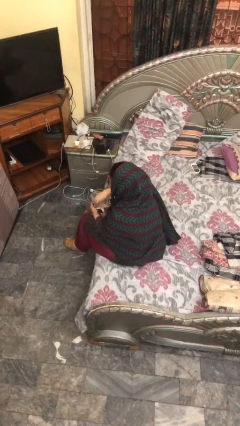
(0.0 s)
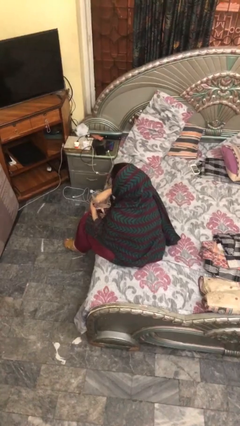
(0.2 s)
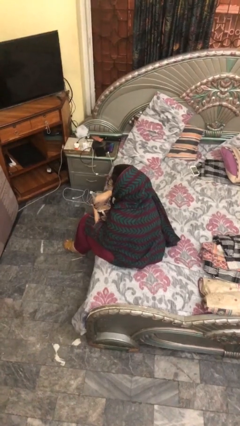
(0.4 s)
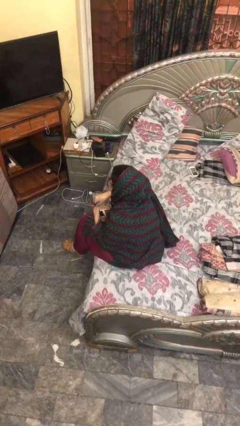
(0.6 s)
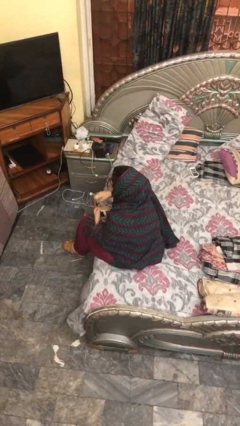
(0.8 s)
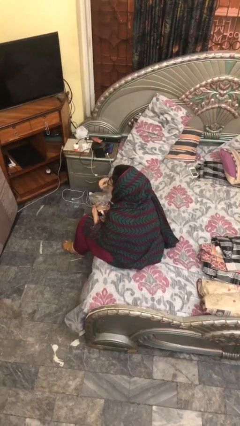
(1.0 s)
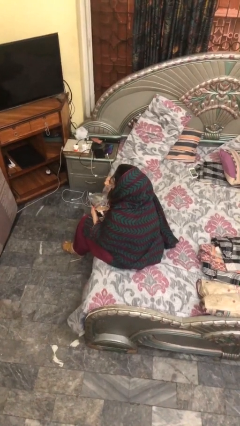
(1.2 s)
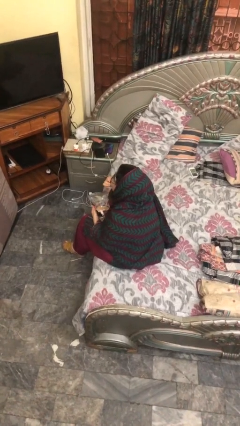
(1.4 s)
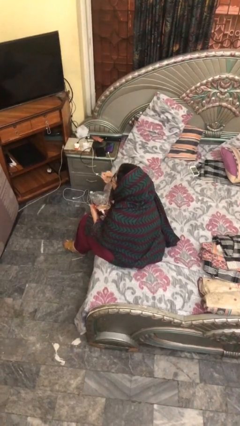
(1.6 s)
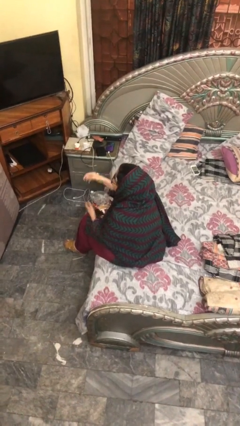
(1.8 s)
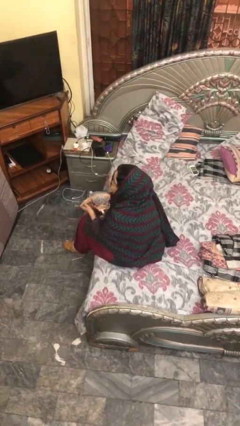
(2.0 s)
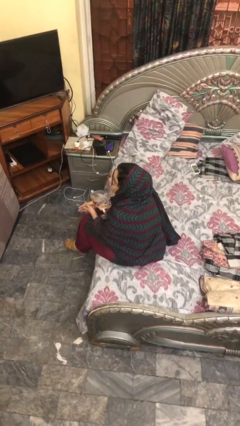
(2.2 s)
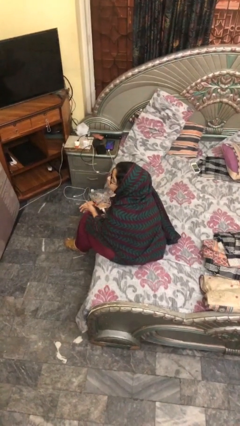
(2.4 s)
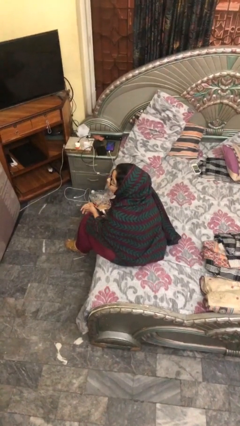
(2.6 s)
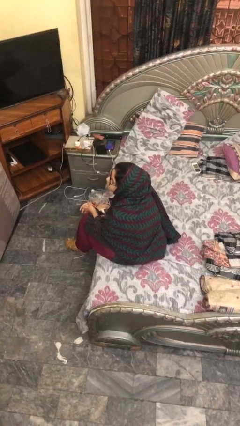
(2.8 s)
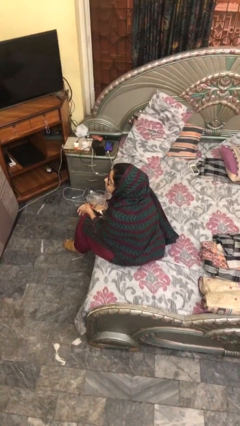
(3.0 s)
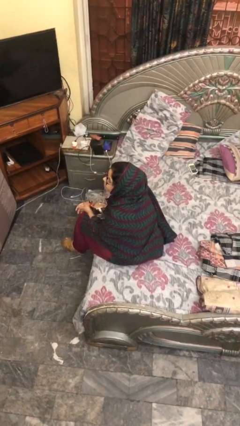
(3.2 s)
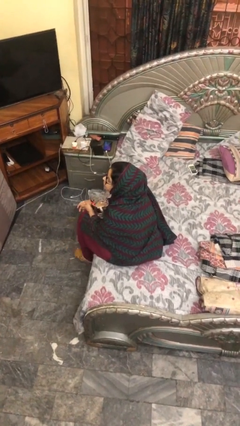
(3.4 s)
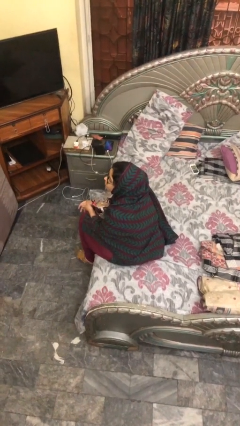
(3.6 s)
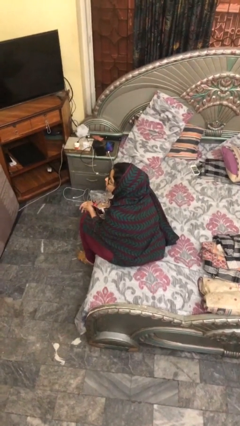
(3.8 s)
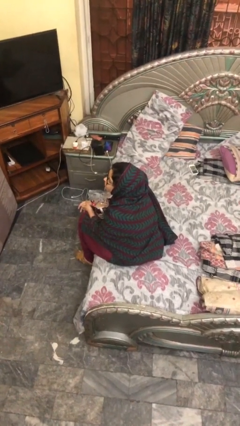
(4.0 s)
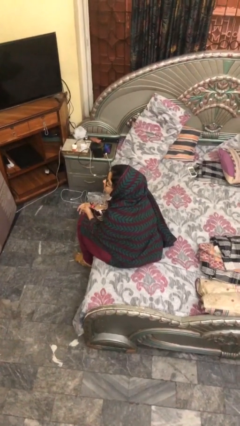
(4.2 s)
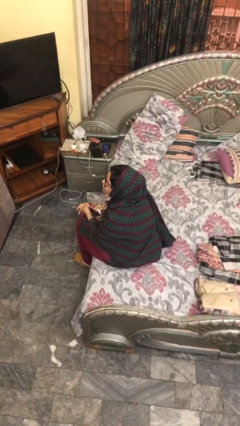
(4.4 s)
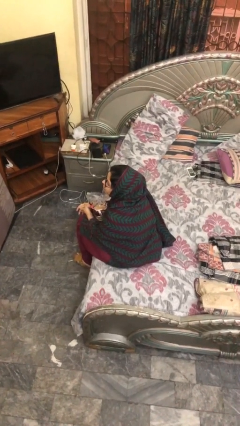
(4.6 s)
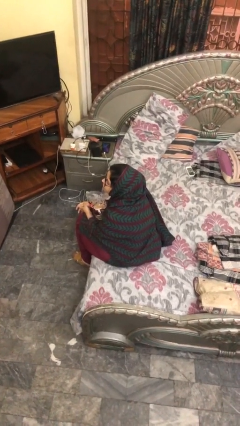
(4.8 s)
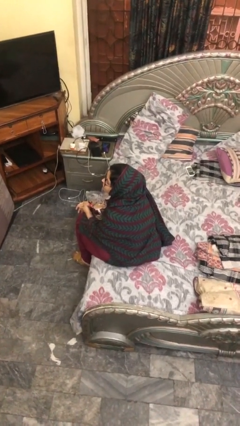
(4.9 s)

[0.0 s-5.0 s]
person eats snack from bag

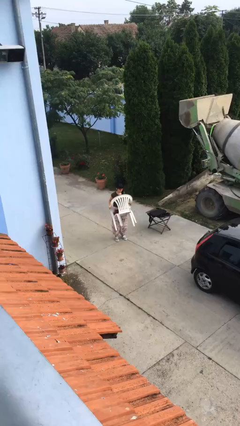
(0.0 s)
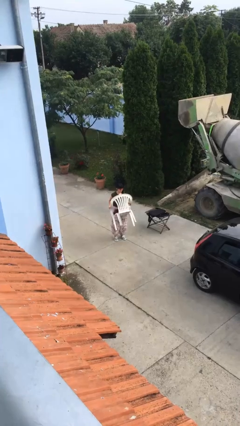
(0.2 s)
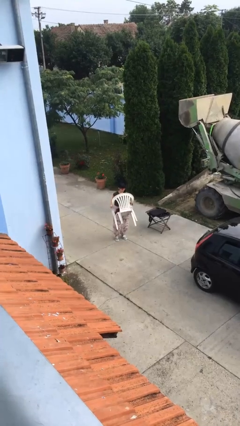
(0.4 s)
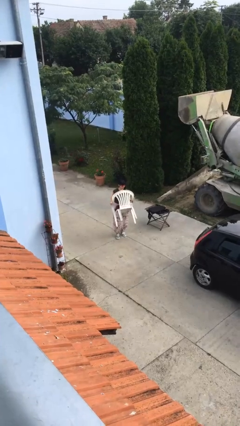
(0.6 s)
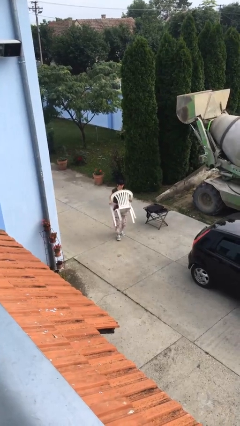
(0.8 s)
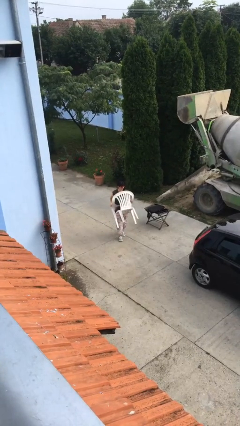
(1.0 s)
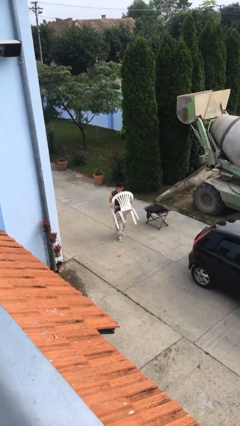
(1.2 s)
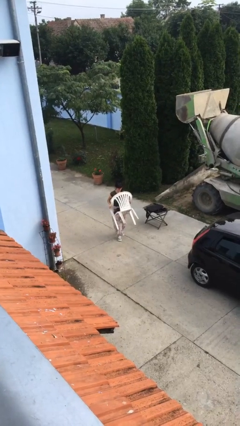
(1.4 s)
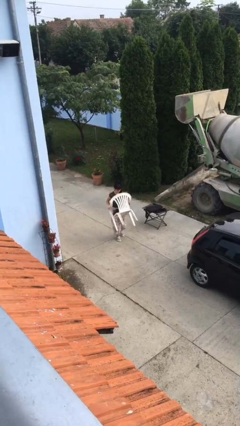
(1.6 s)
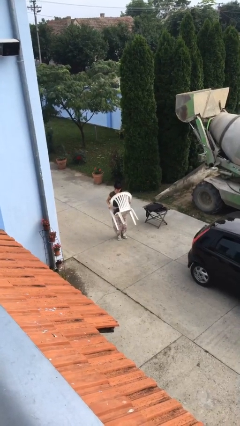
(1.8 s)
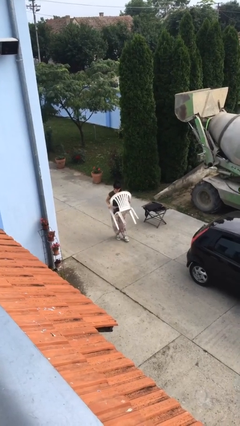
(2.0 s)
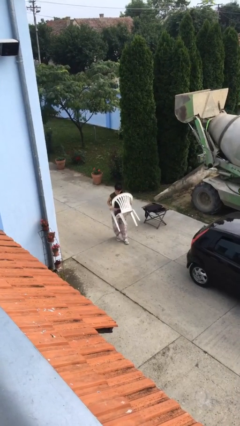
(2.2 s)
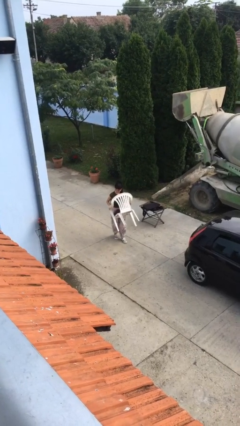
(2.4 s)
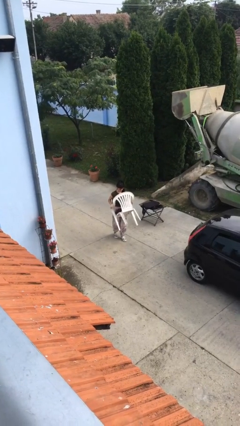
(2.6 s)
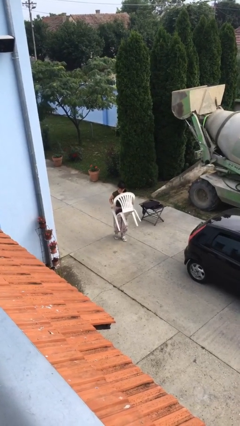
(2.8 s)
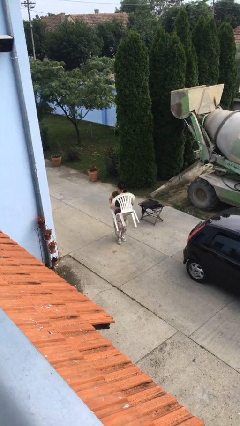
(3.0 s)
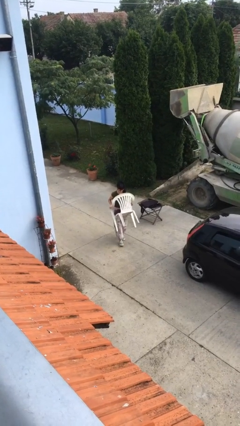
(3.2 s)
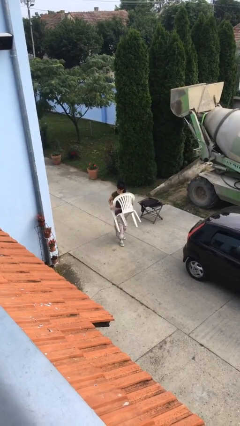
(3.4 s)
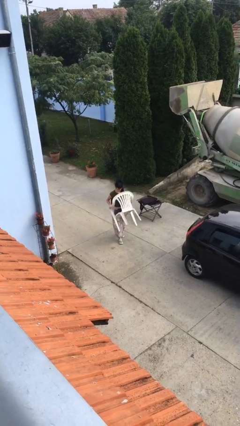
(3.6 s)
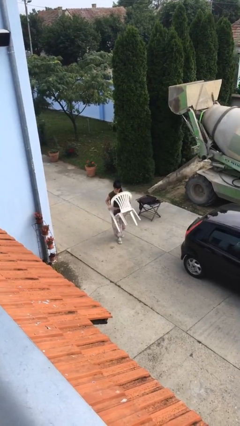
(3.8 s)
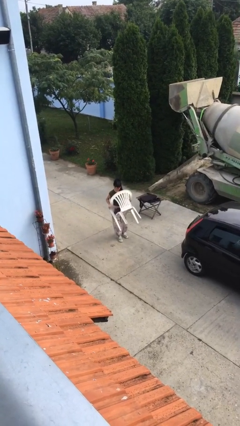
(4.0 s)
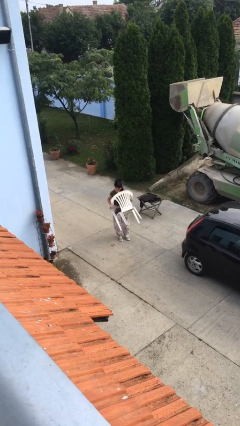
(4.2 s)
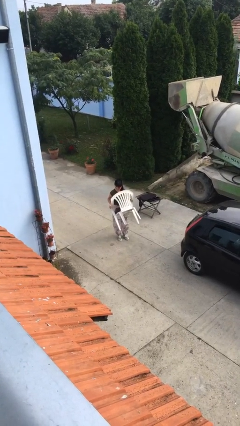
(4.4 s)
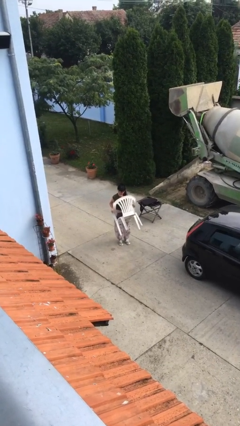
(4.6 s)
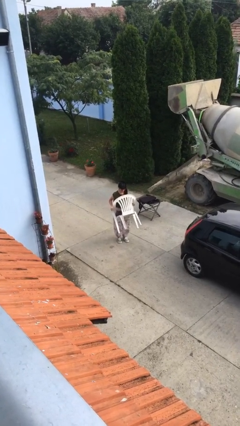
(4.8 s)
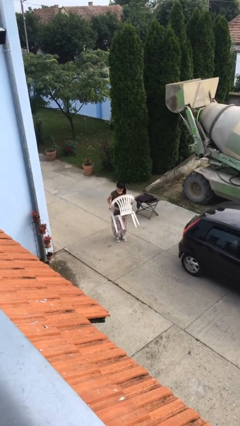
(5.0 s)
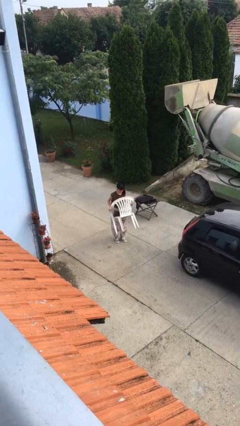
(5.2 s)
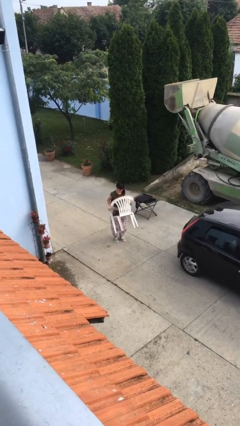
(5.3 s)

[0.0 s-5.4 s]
person carries heavy object

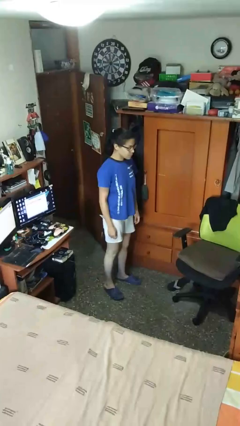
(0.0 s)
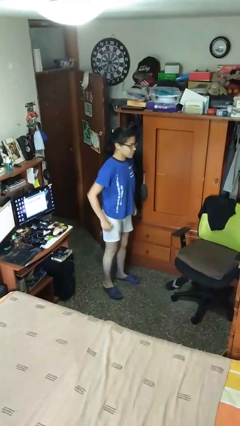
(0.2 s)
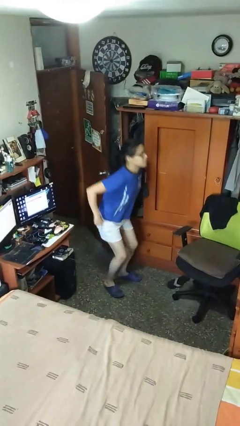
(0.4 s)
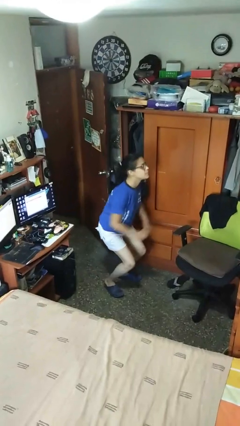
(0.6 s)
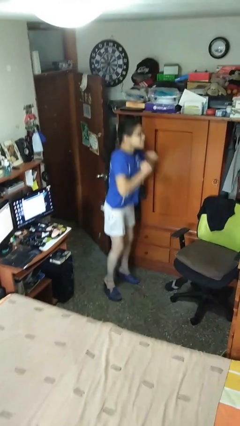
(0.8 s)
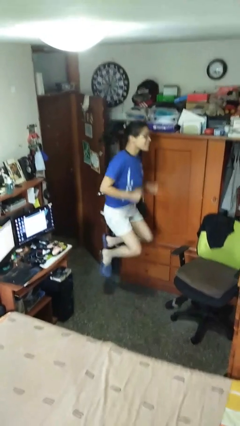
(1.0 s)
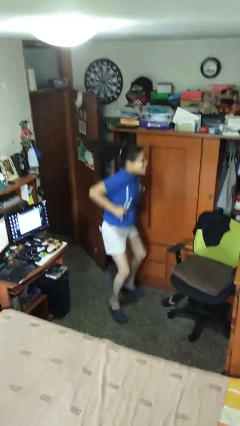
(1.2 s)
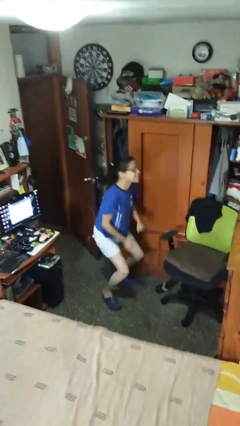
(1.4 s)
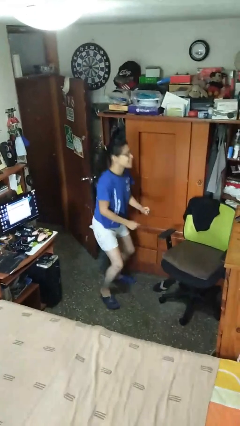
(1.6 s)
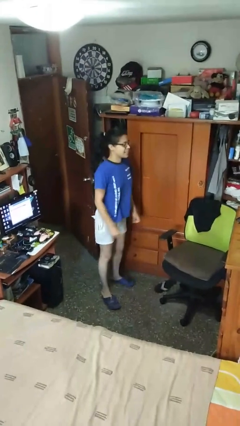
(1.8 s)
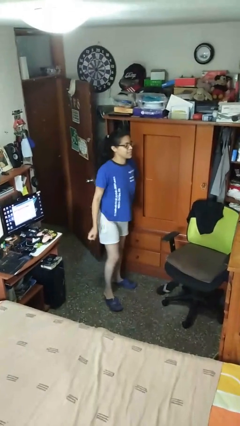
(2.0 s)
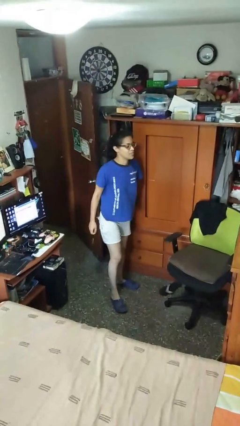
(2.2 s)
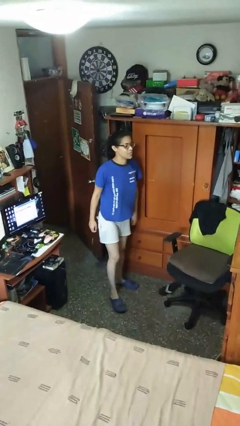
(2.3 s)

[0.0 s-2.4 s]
person jumps

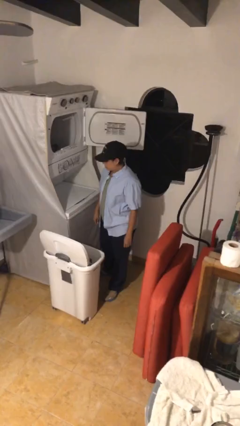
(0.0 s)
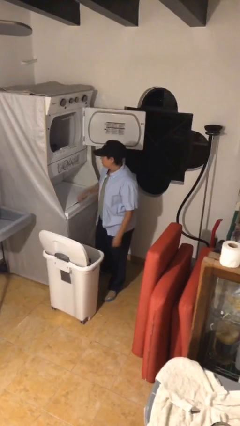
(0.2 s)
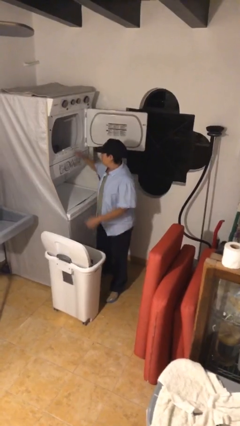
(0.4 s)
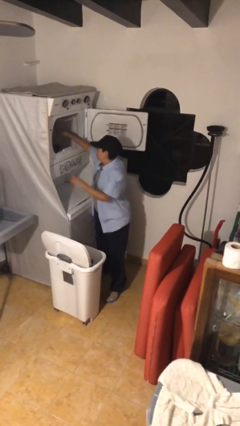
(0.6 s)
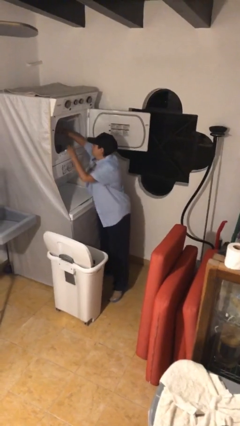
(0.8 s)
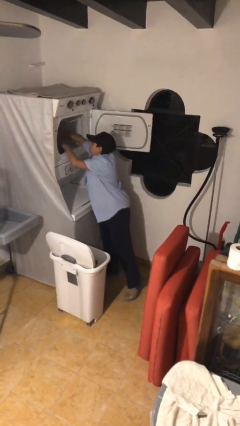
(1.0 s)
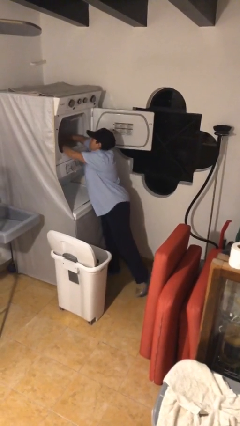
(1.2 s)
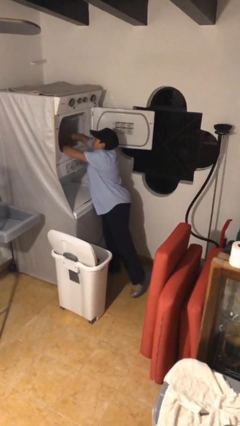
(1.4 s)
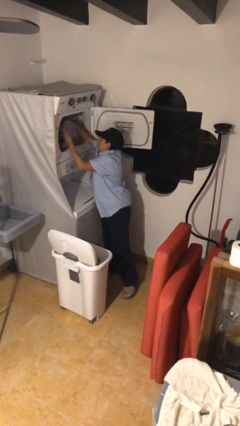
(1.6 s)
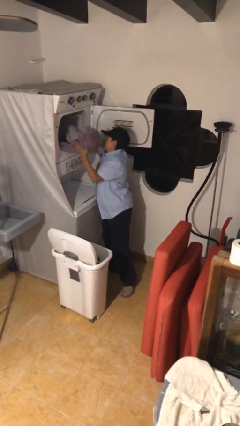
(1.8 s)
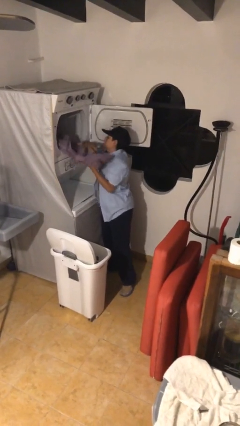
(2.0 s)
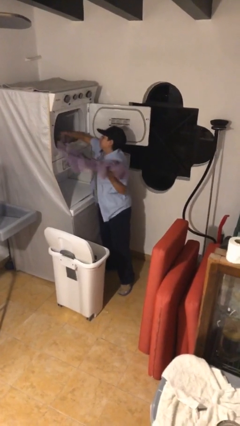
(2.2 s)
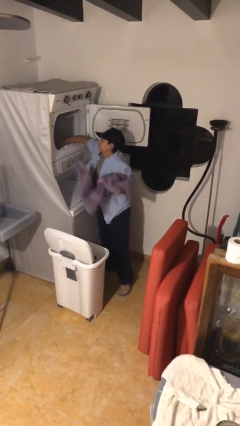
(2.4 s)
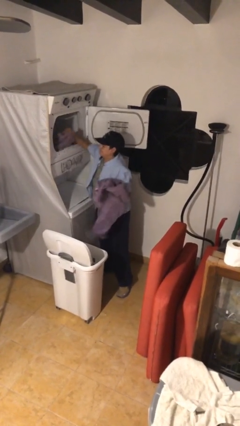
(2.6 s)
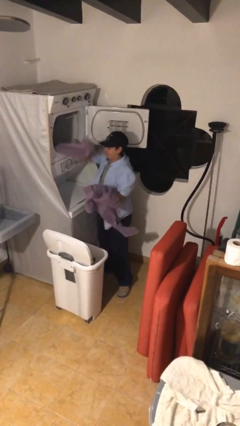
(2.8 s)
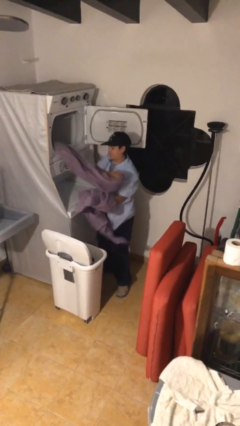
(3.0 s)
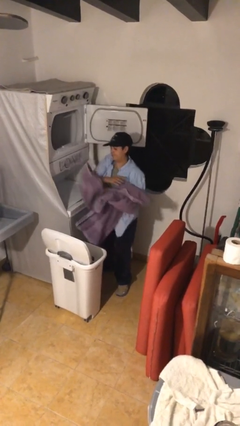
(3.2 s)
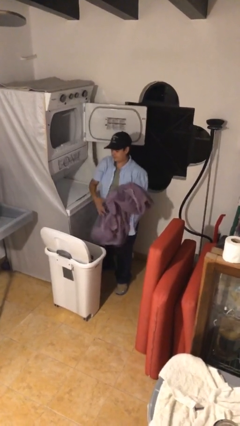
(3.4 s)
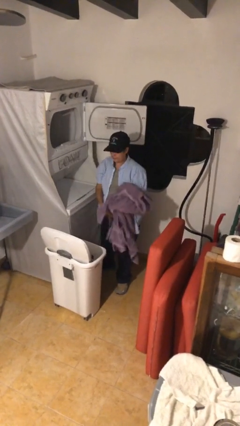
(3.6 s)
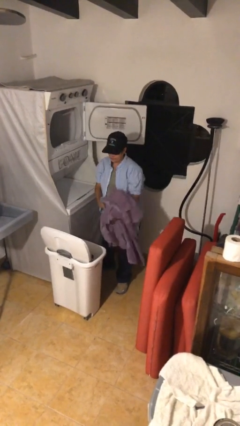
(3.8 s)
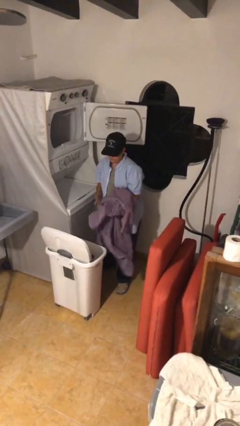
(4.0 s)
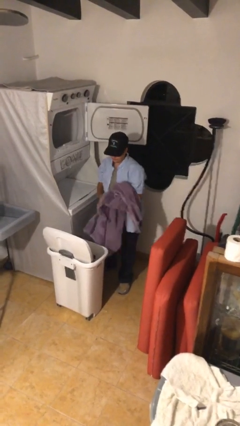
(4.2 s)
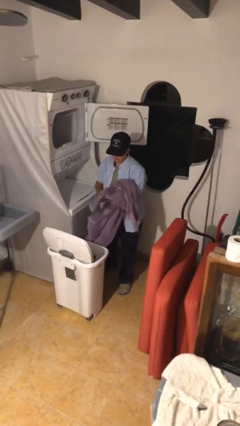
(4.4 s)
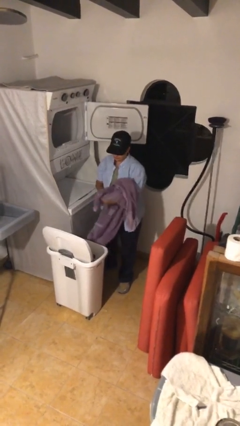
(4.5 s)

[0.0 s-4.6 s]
person unloads dryer

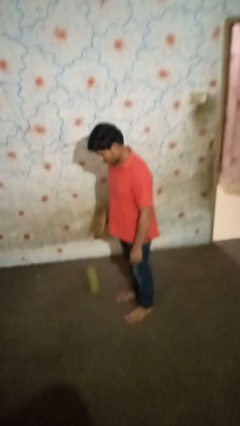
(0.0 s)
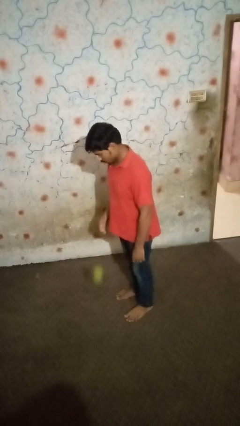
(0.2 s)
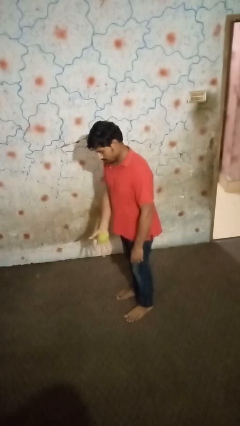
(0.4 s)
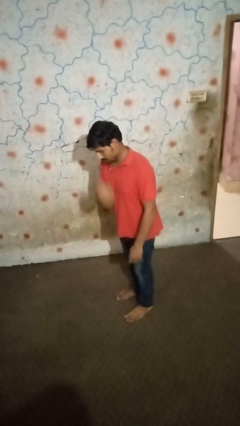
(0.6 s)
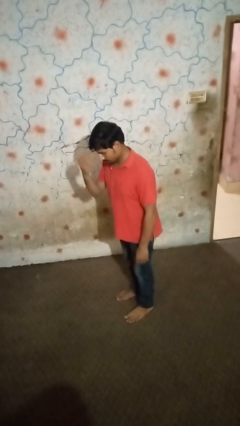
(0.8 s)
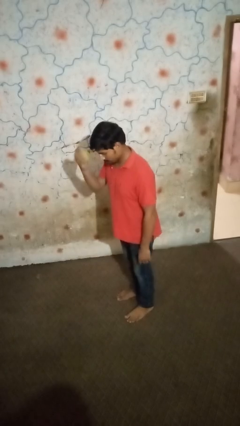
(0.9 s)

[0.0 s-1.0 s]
person bounces ball on floor
